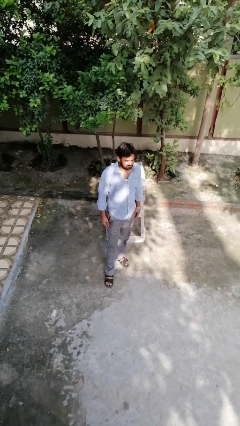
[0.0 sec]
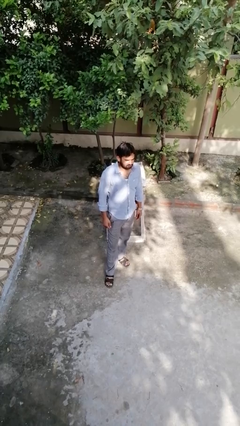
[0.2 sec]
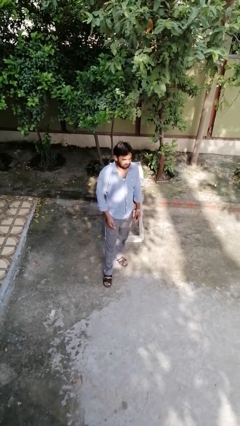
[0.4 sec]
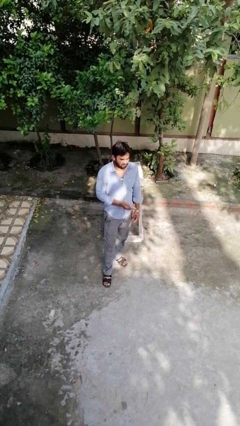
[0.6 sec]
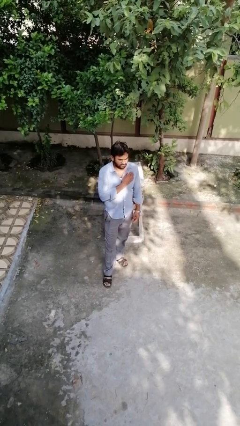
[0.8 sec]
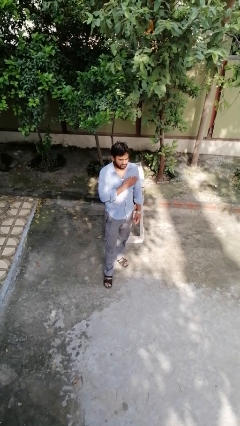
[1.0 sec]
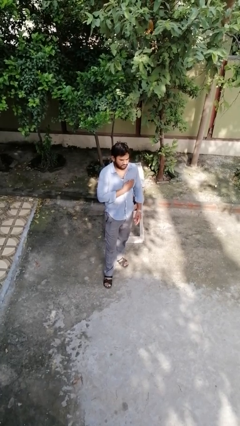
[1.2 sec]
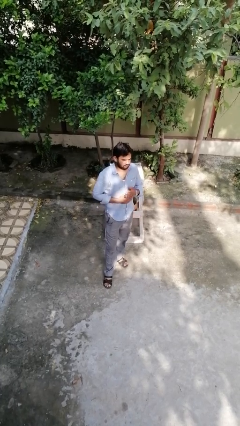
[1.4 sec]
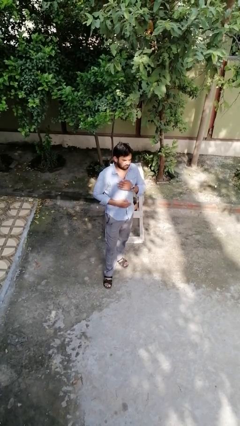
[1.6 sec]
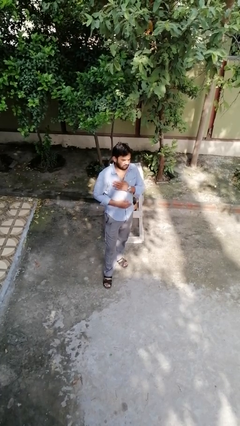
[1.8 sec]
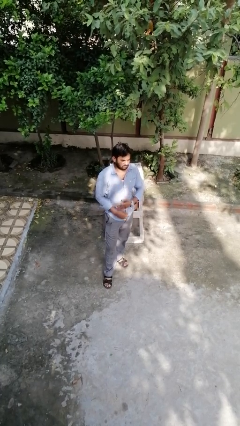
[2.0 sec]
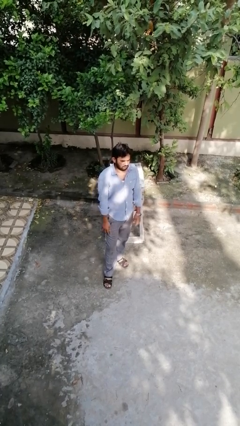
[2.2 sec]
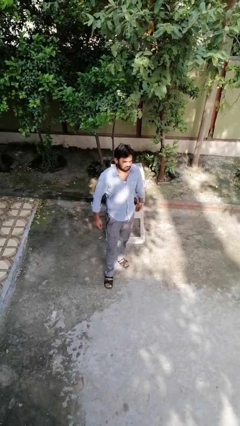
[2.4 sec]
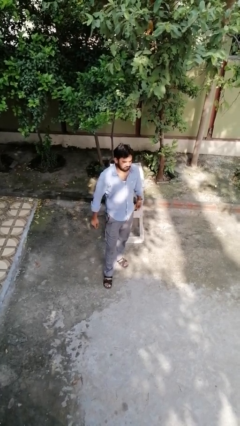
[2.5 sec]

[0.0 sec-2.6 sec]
person drums on chest

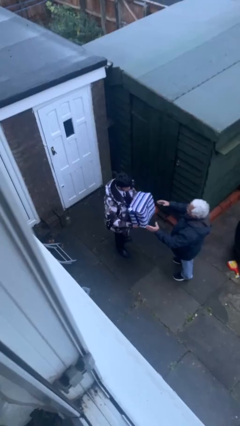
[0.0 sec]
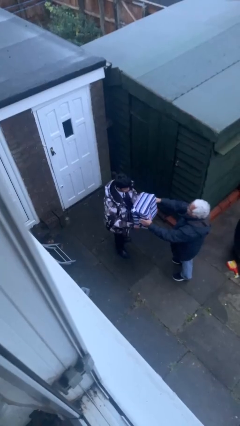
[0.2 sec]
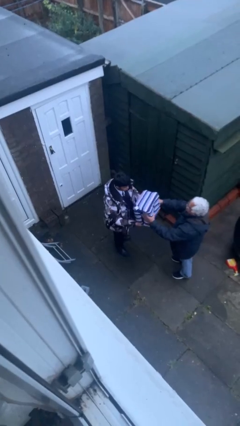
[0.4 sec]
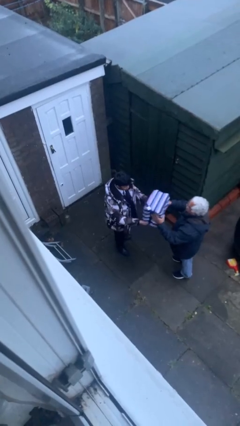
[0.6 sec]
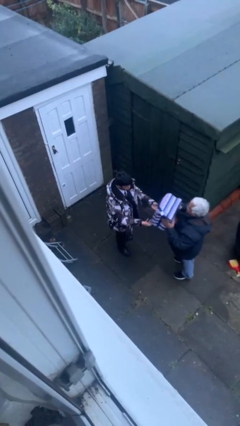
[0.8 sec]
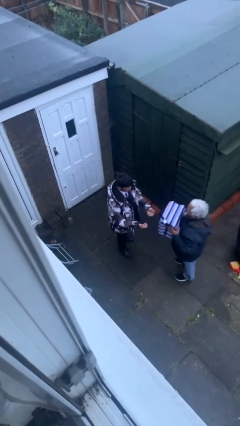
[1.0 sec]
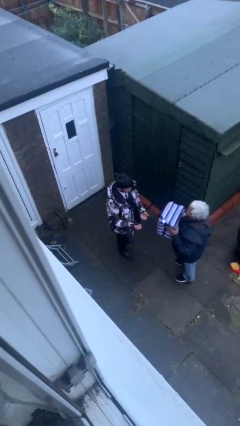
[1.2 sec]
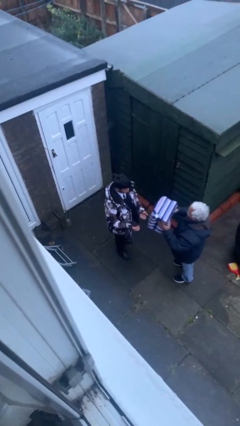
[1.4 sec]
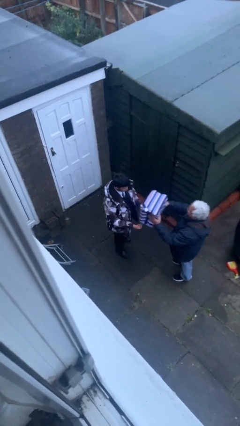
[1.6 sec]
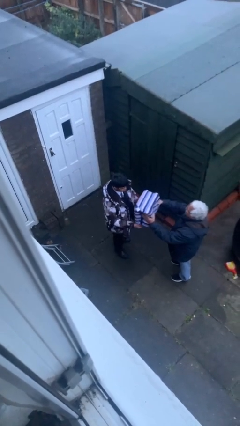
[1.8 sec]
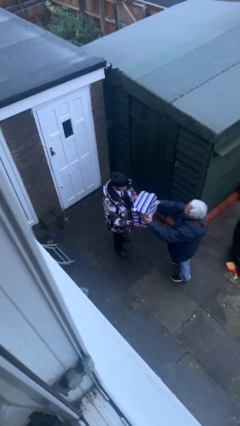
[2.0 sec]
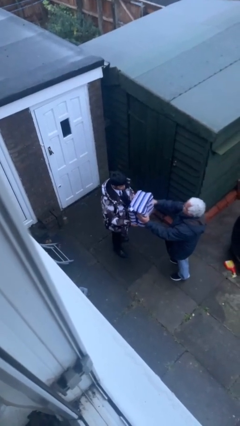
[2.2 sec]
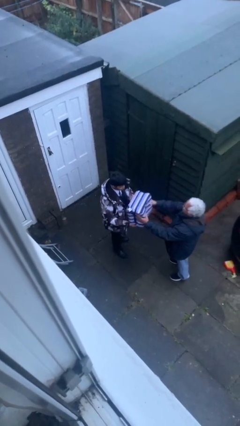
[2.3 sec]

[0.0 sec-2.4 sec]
person transfers object to person

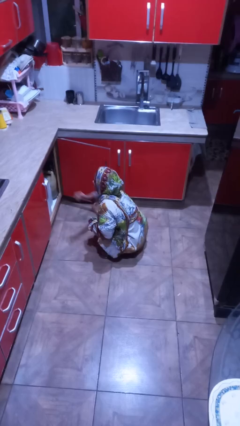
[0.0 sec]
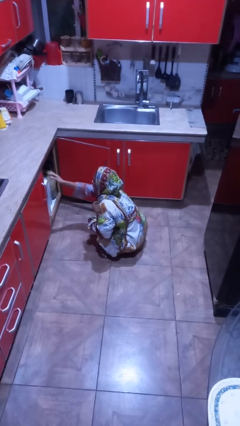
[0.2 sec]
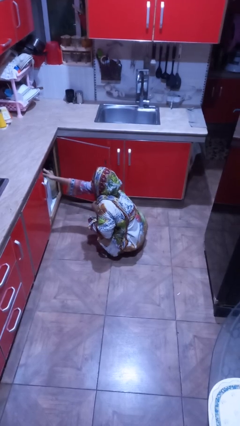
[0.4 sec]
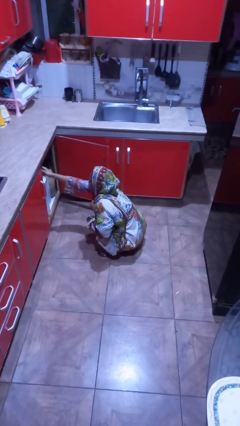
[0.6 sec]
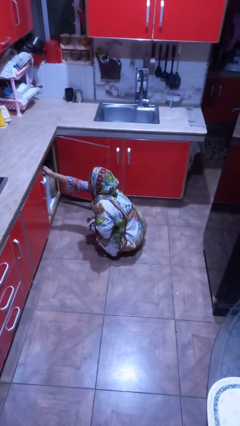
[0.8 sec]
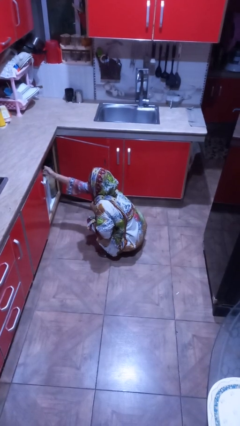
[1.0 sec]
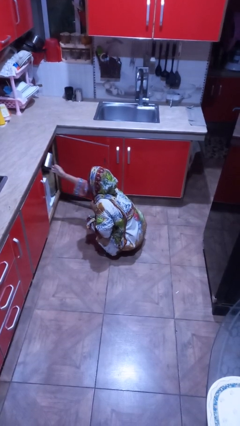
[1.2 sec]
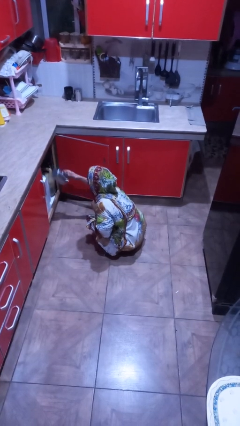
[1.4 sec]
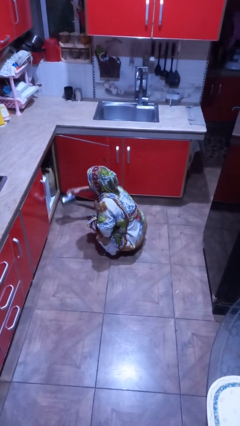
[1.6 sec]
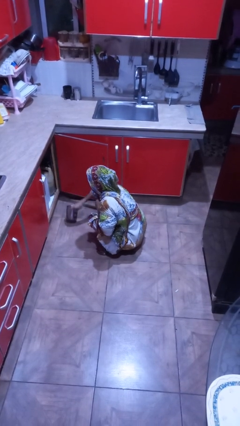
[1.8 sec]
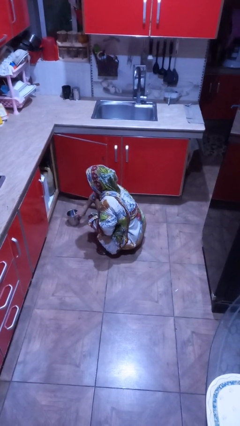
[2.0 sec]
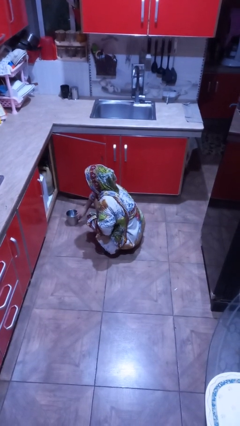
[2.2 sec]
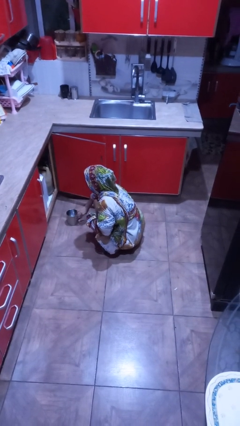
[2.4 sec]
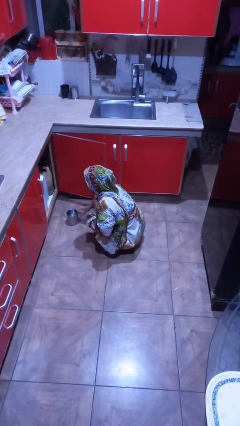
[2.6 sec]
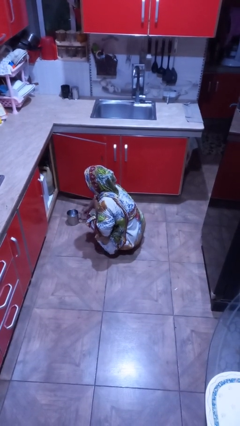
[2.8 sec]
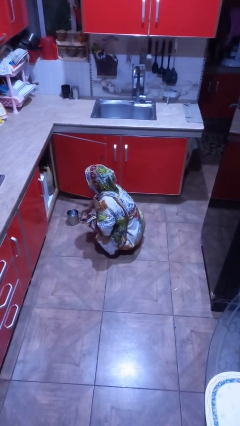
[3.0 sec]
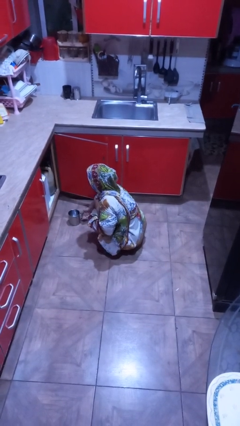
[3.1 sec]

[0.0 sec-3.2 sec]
person takes object from cabinet

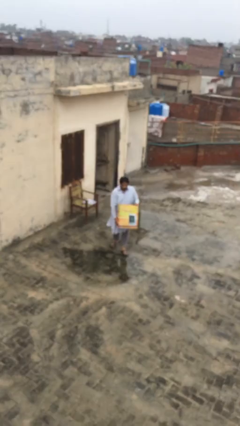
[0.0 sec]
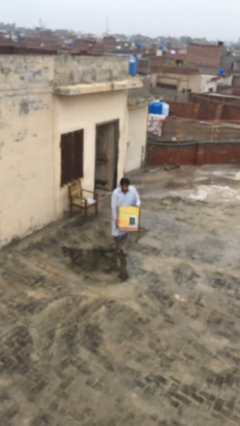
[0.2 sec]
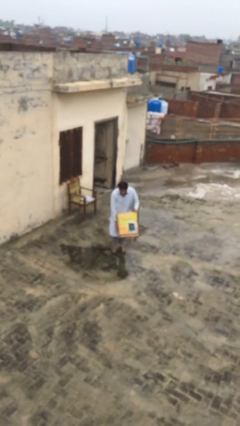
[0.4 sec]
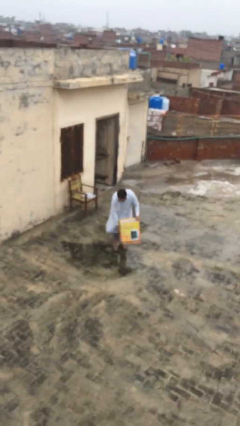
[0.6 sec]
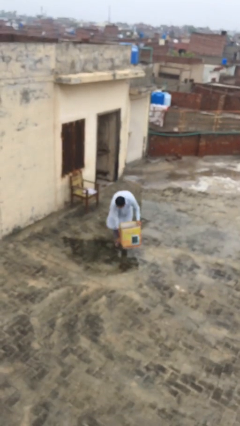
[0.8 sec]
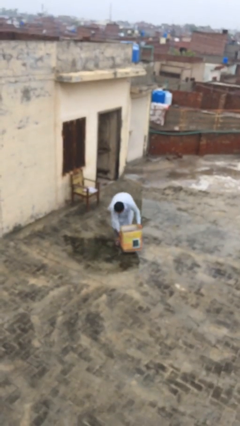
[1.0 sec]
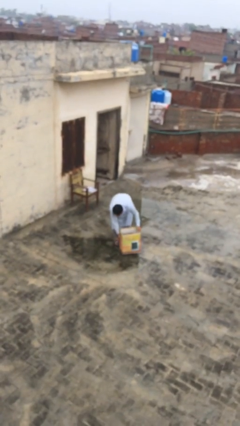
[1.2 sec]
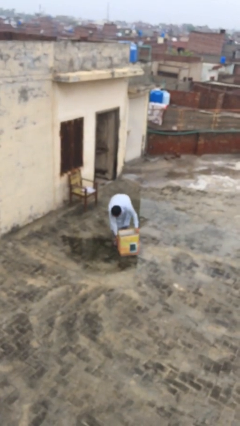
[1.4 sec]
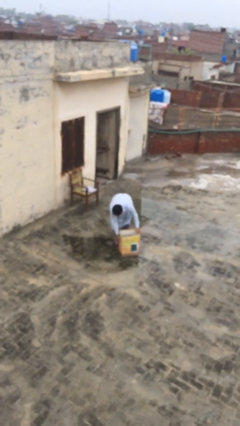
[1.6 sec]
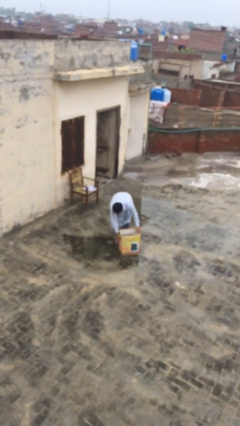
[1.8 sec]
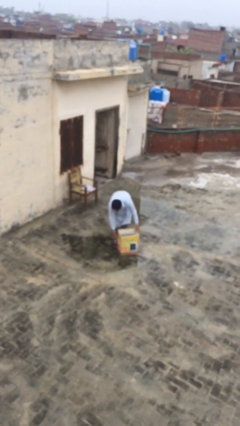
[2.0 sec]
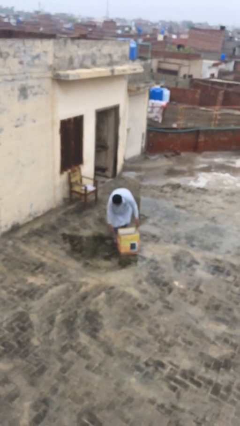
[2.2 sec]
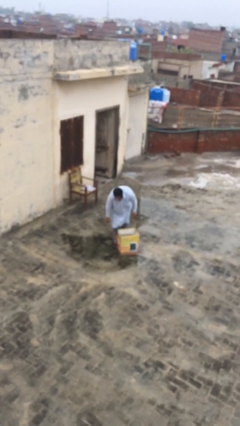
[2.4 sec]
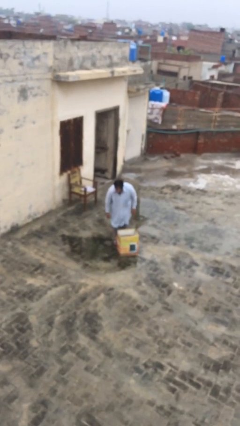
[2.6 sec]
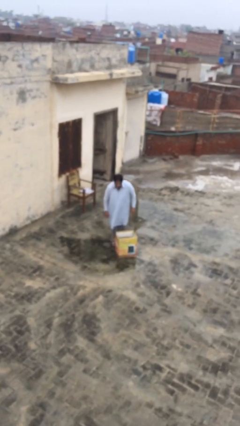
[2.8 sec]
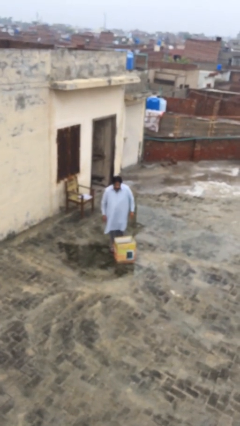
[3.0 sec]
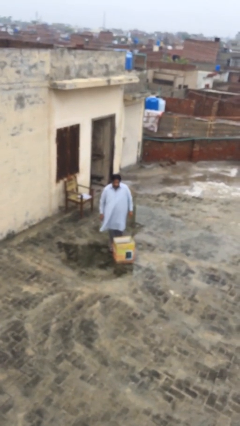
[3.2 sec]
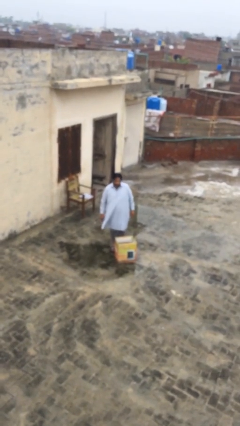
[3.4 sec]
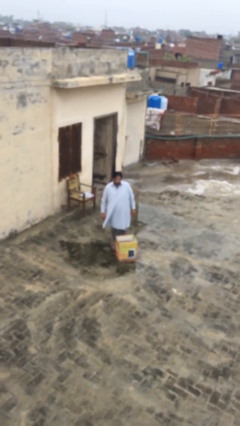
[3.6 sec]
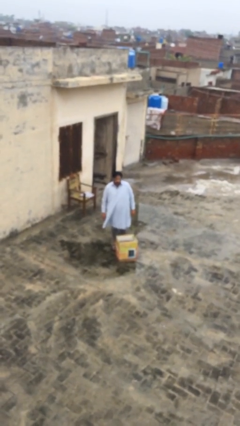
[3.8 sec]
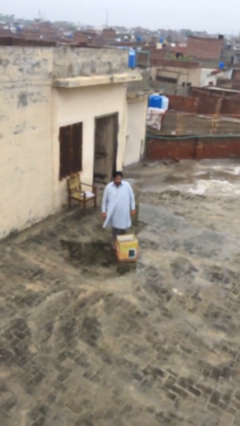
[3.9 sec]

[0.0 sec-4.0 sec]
person puts down object on floor

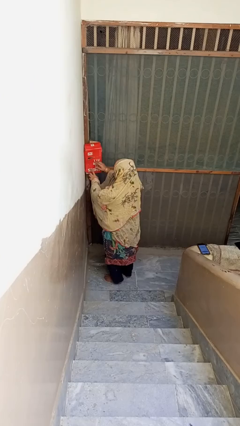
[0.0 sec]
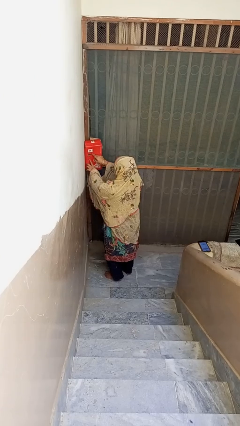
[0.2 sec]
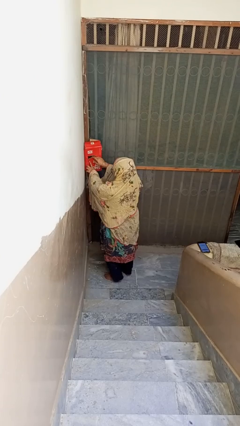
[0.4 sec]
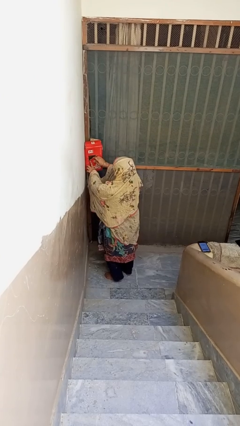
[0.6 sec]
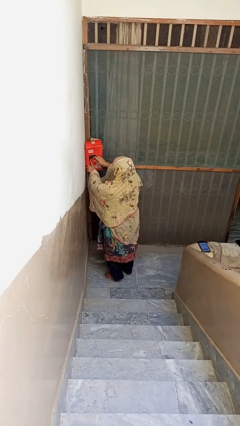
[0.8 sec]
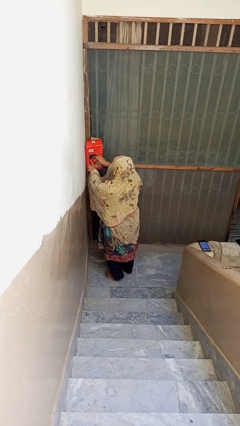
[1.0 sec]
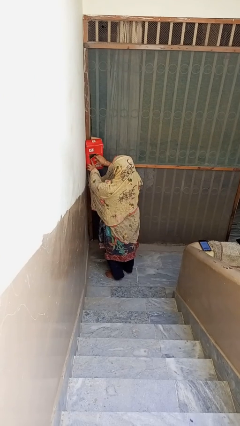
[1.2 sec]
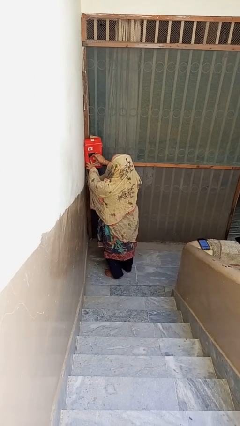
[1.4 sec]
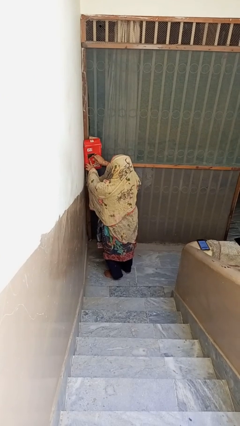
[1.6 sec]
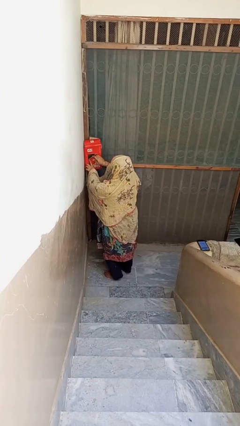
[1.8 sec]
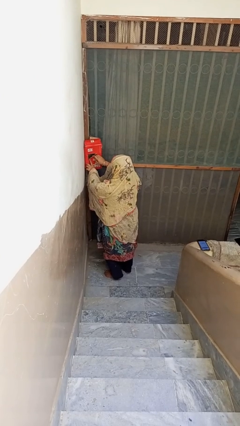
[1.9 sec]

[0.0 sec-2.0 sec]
person opens mailbox

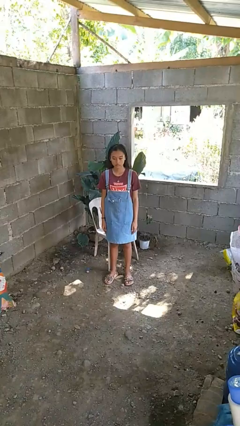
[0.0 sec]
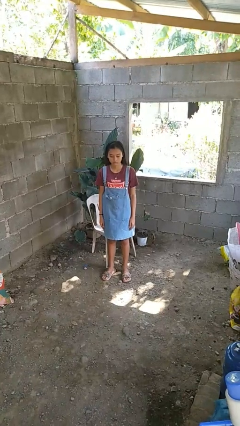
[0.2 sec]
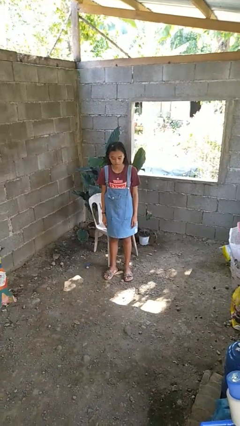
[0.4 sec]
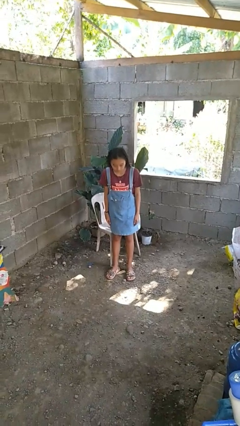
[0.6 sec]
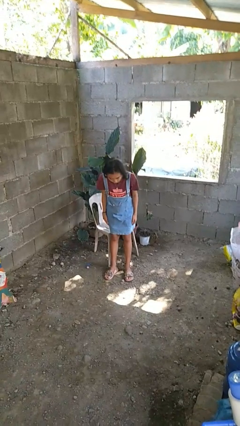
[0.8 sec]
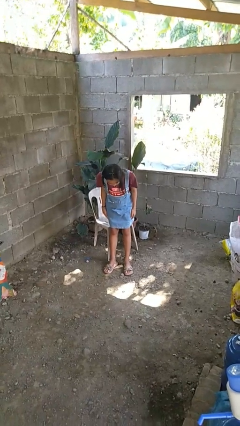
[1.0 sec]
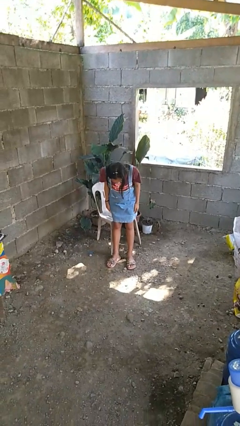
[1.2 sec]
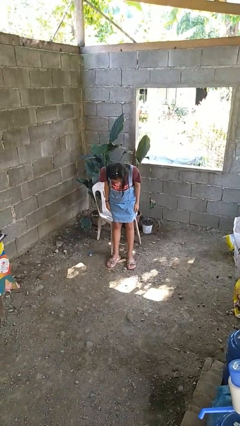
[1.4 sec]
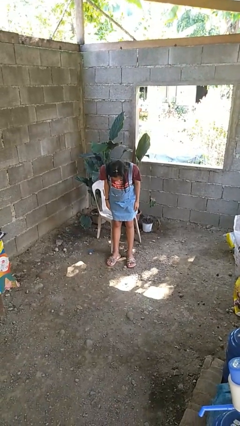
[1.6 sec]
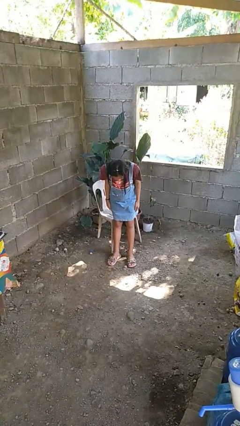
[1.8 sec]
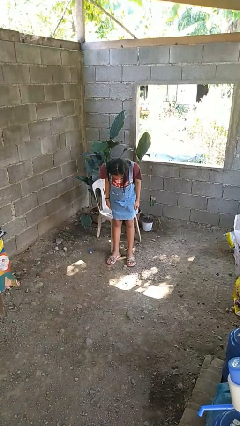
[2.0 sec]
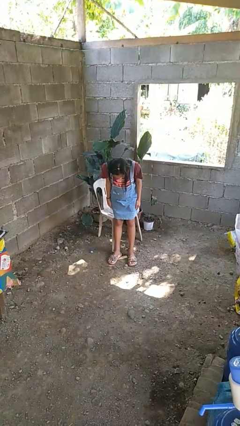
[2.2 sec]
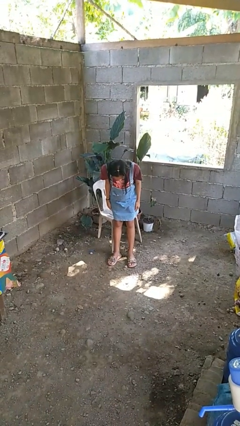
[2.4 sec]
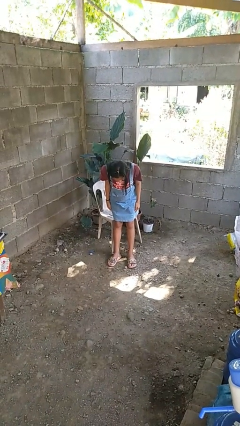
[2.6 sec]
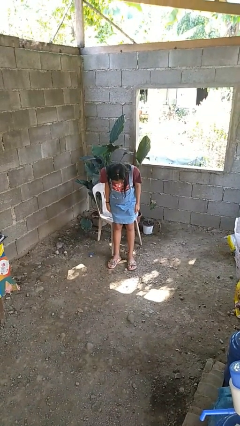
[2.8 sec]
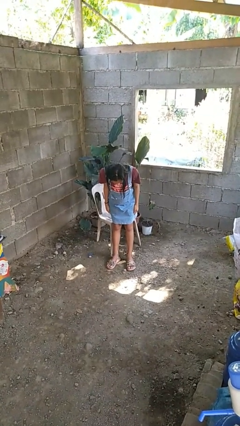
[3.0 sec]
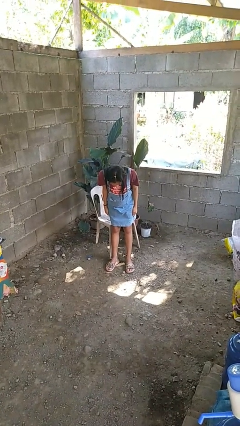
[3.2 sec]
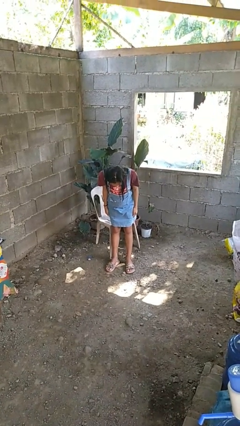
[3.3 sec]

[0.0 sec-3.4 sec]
person bows
